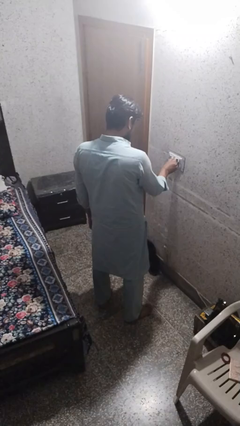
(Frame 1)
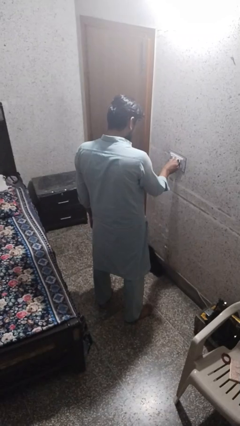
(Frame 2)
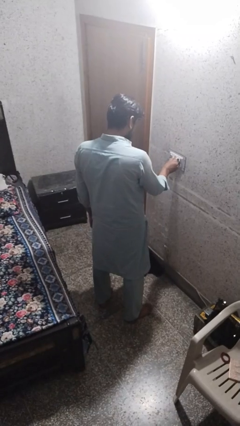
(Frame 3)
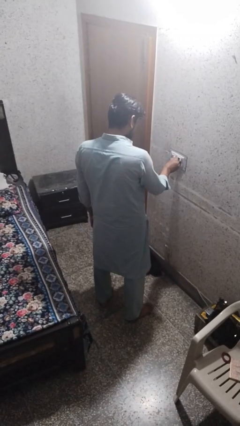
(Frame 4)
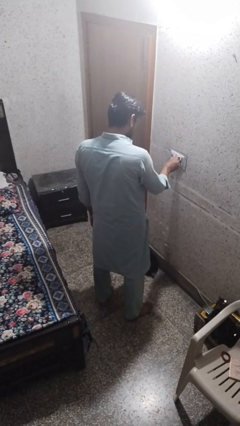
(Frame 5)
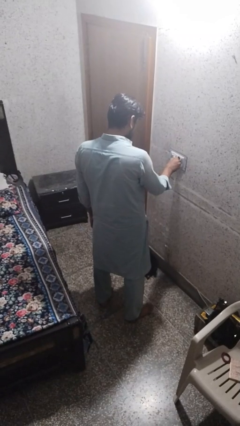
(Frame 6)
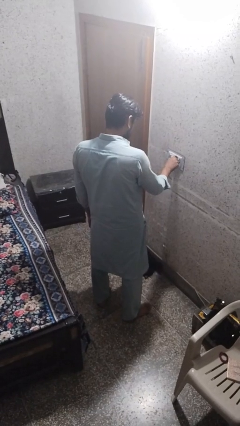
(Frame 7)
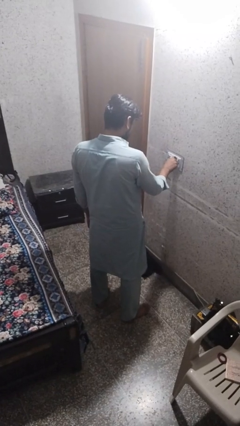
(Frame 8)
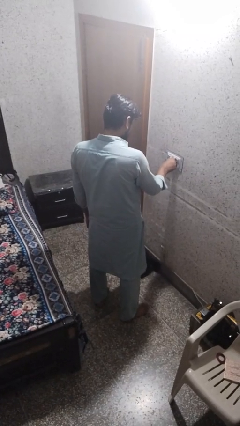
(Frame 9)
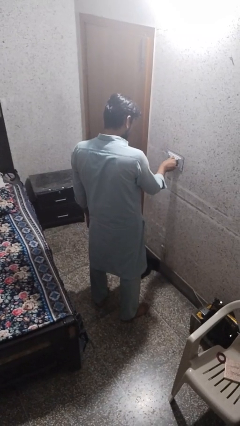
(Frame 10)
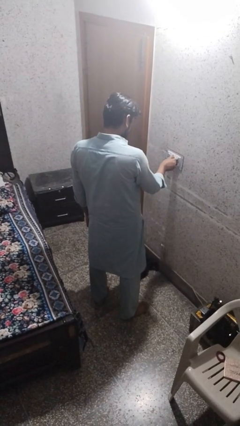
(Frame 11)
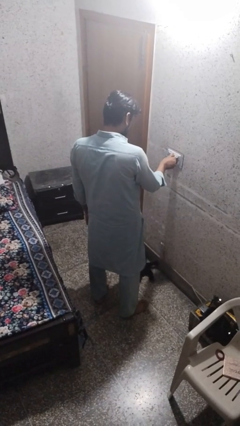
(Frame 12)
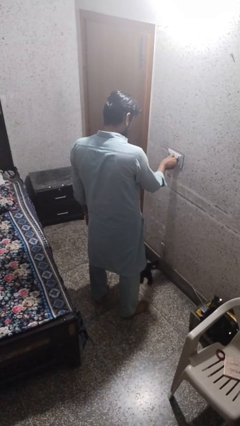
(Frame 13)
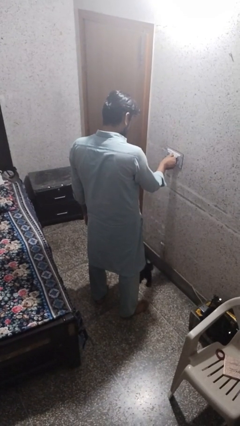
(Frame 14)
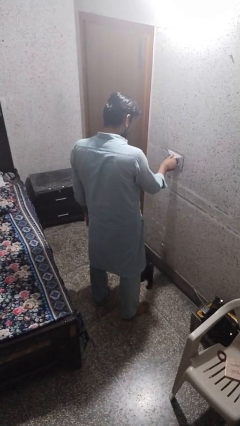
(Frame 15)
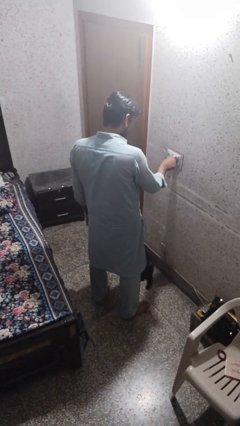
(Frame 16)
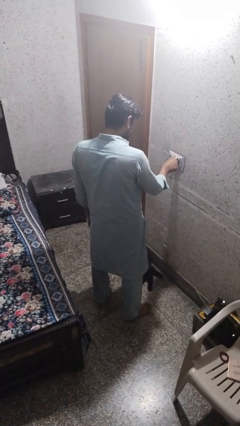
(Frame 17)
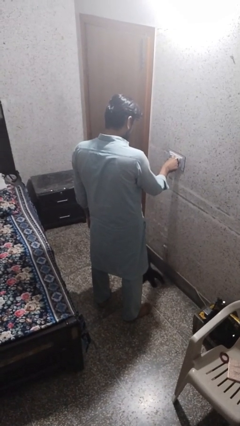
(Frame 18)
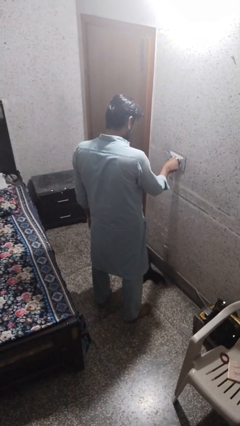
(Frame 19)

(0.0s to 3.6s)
person turns off fan

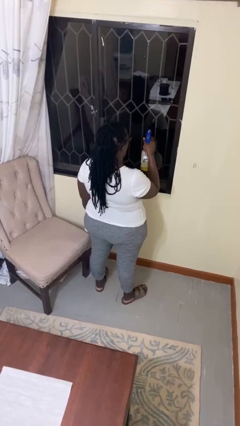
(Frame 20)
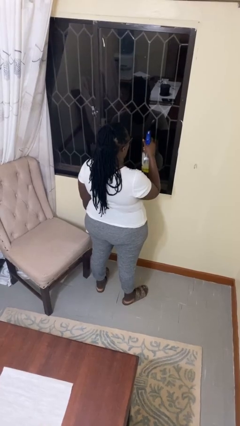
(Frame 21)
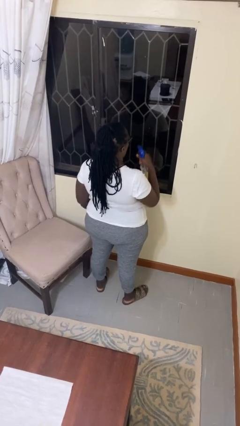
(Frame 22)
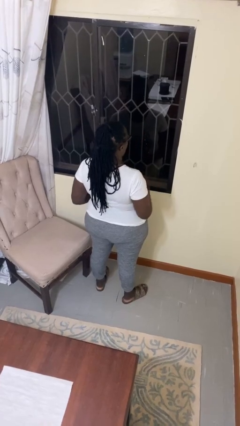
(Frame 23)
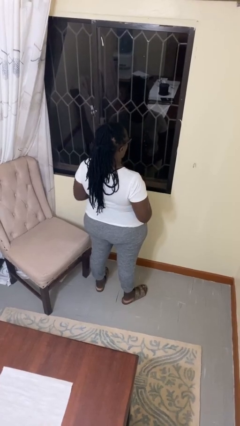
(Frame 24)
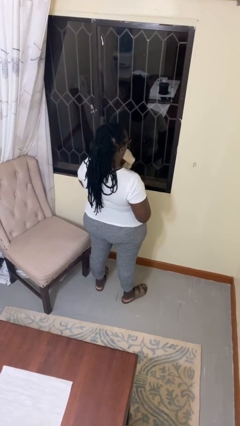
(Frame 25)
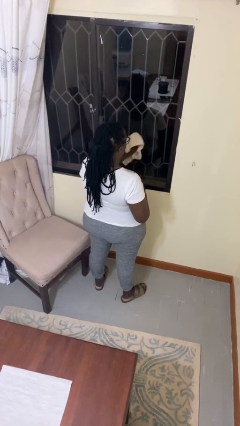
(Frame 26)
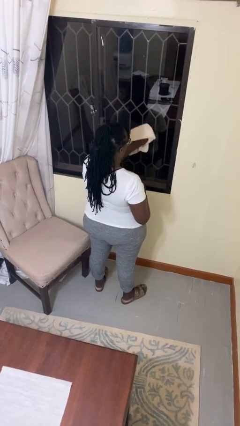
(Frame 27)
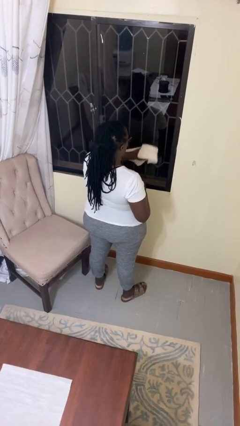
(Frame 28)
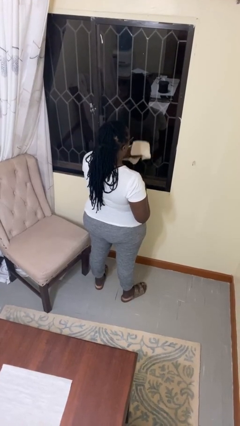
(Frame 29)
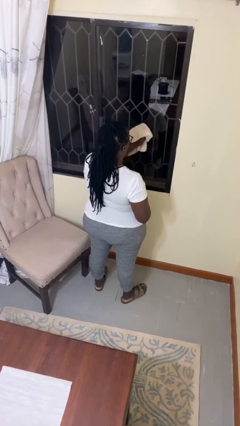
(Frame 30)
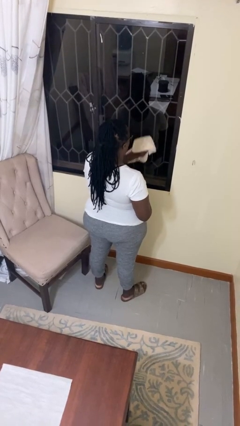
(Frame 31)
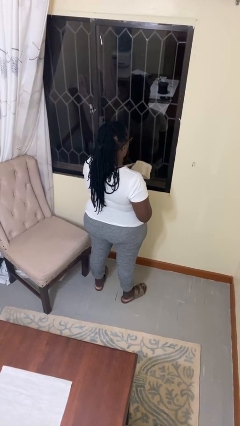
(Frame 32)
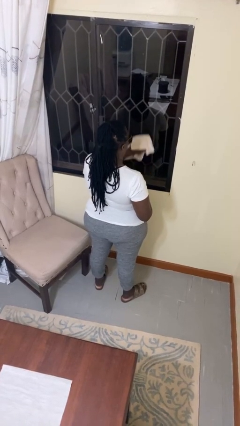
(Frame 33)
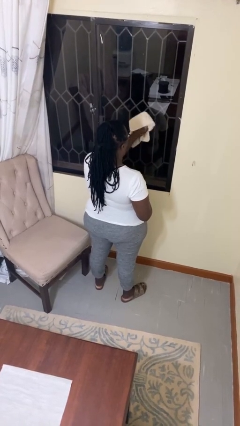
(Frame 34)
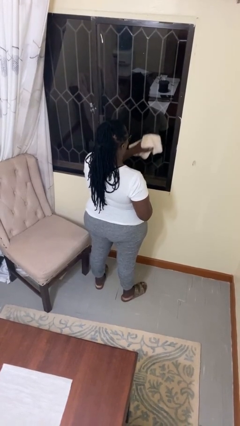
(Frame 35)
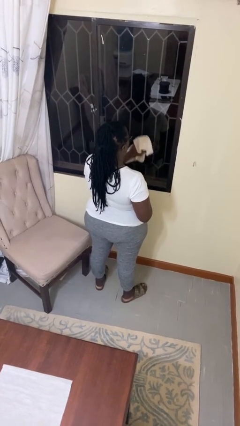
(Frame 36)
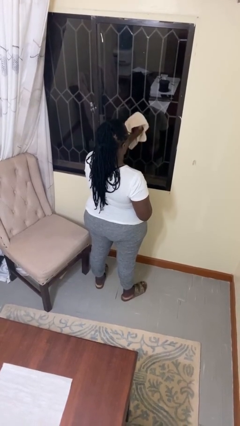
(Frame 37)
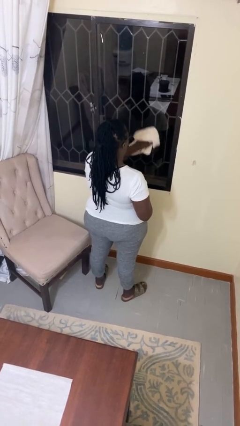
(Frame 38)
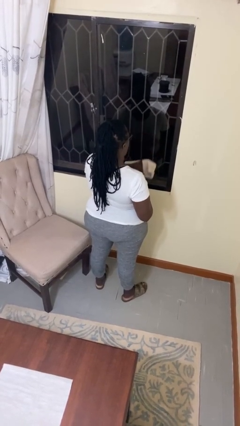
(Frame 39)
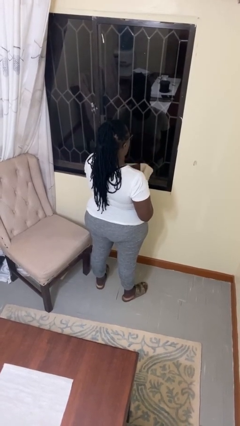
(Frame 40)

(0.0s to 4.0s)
person washes window

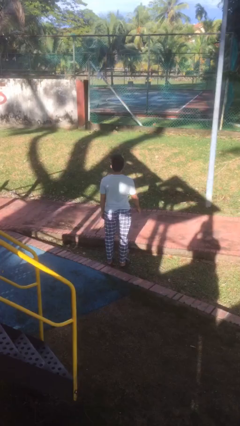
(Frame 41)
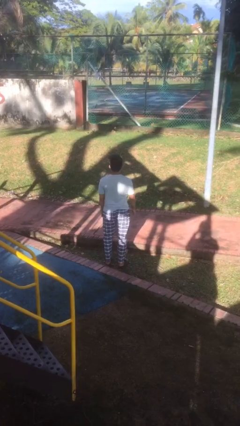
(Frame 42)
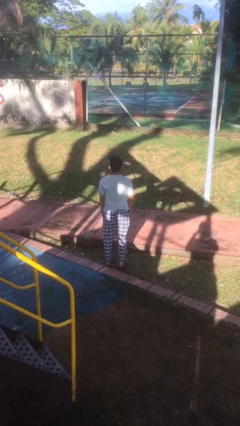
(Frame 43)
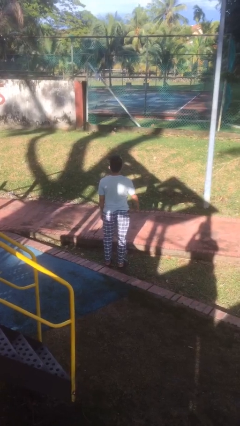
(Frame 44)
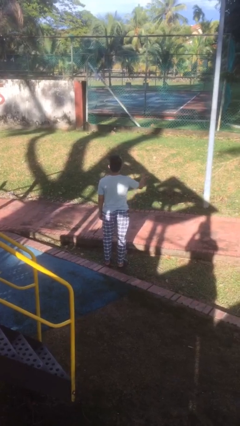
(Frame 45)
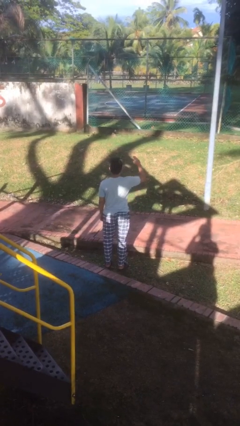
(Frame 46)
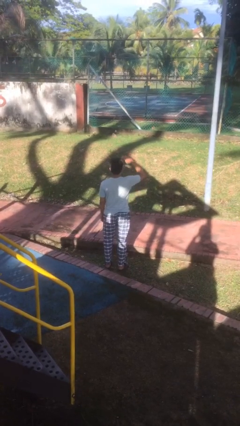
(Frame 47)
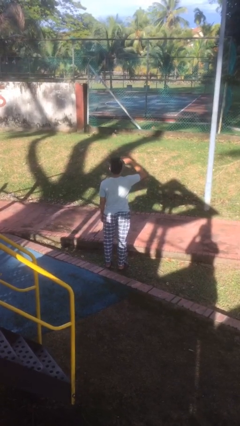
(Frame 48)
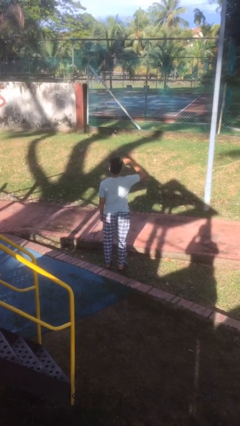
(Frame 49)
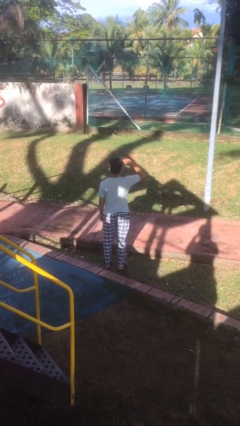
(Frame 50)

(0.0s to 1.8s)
person salutes

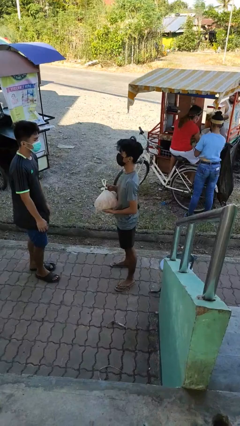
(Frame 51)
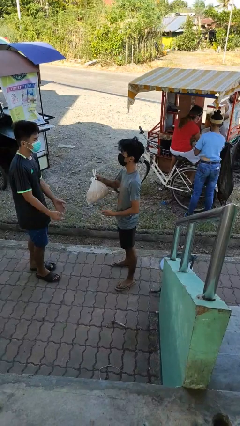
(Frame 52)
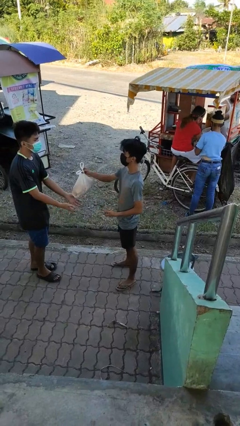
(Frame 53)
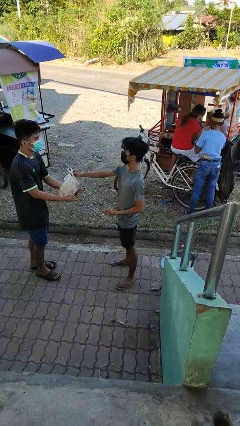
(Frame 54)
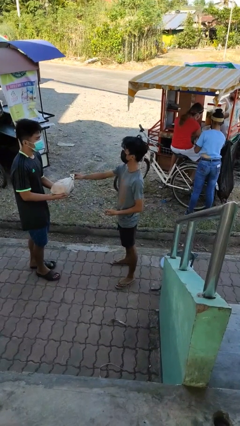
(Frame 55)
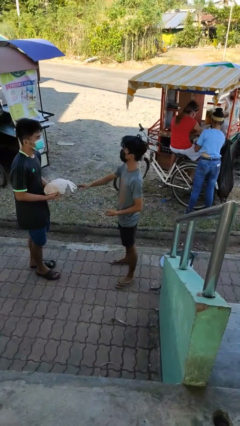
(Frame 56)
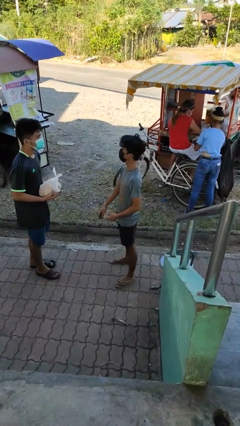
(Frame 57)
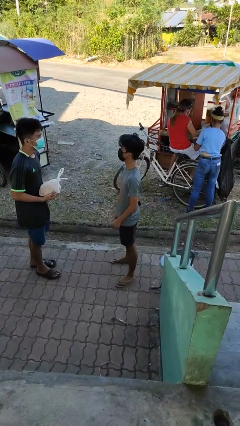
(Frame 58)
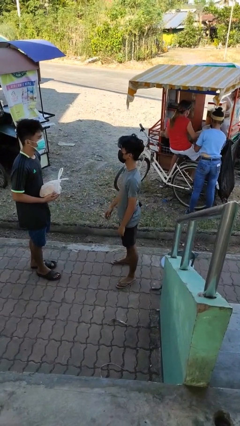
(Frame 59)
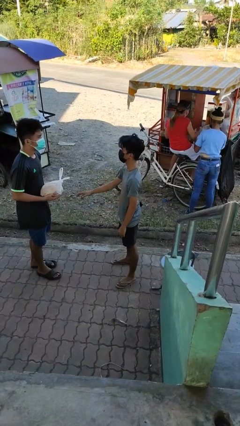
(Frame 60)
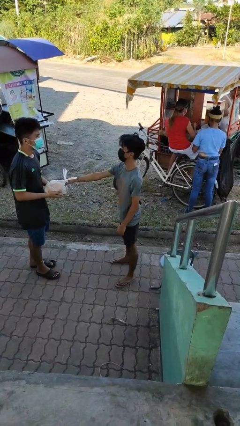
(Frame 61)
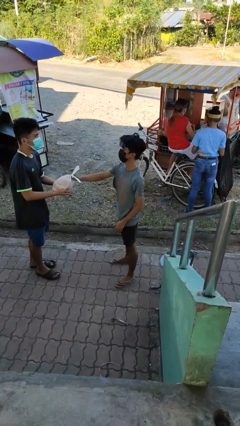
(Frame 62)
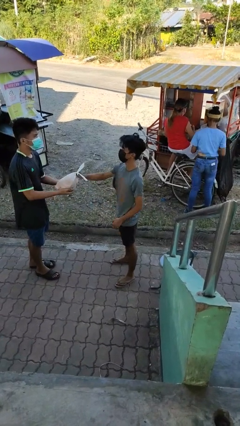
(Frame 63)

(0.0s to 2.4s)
person transfers object to person

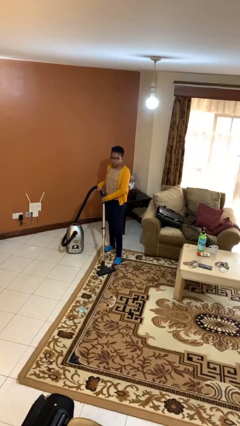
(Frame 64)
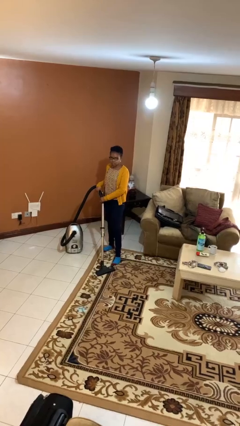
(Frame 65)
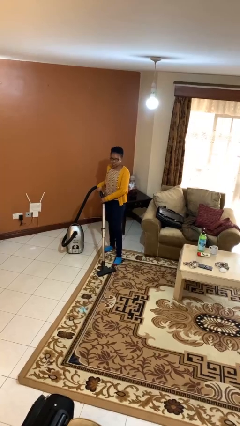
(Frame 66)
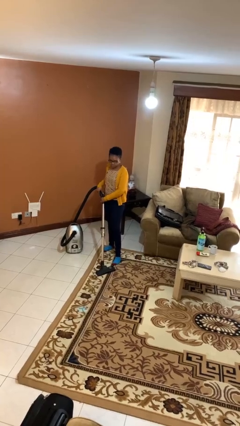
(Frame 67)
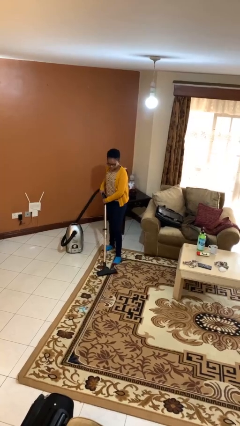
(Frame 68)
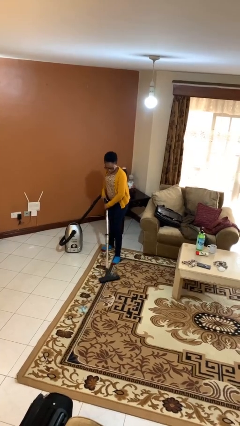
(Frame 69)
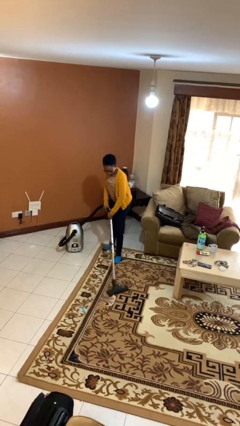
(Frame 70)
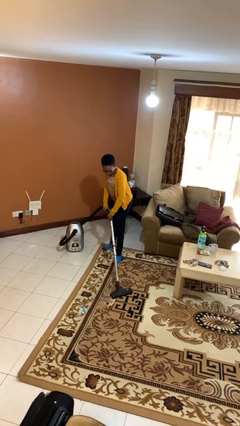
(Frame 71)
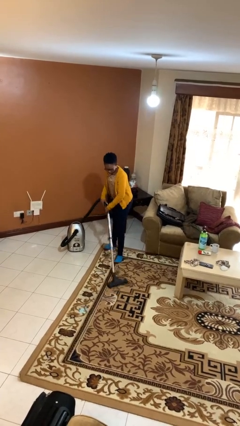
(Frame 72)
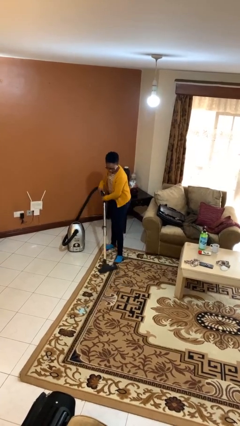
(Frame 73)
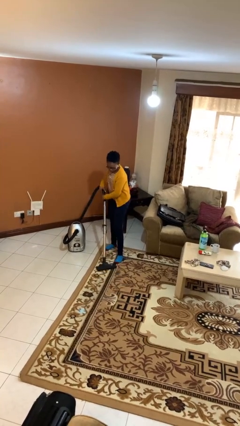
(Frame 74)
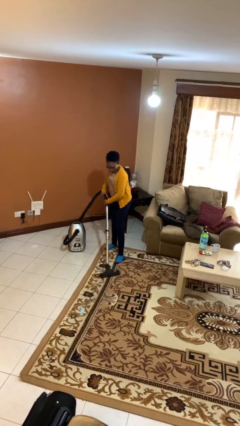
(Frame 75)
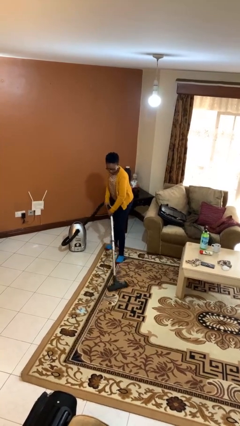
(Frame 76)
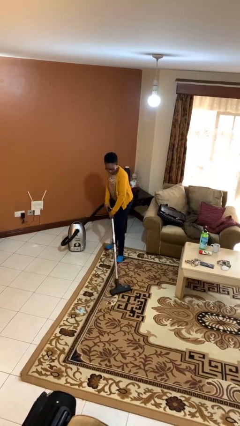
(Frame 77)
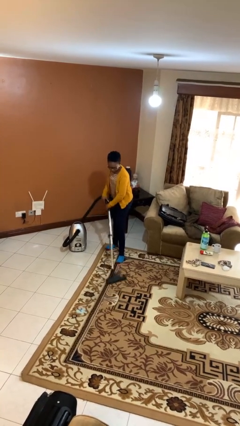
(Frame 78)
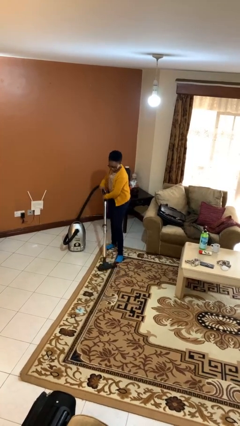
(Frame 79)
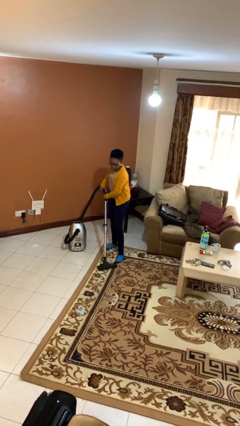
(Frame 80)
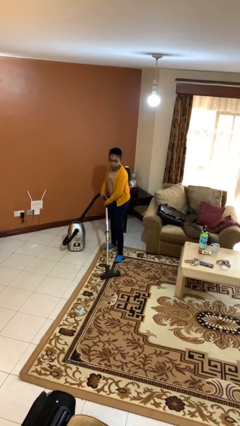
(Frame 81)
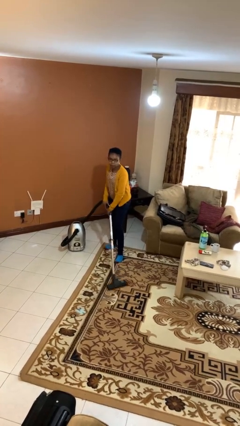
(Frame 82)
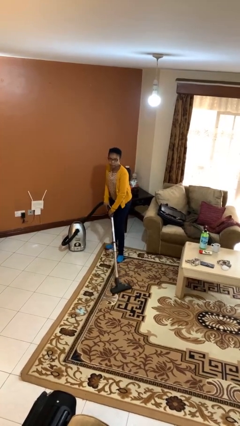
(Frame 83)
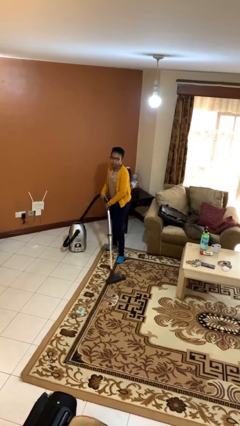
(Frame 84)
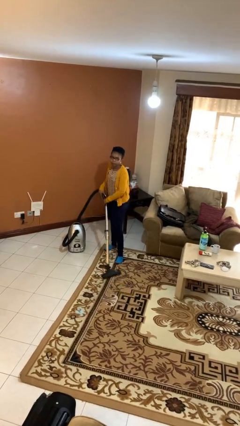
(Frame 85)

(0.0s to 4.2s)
person vacuums carpet

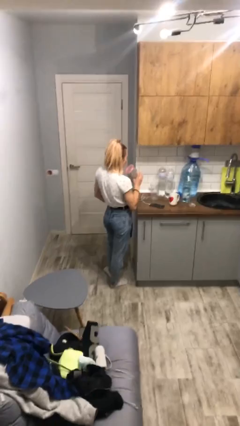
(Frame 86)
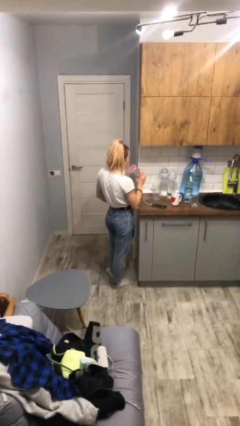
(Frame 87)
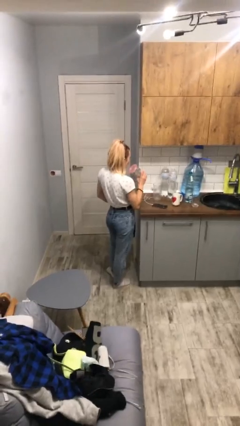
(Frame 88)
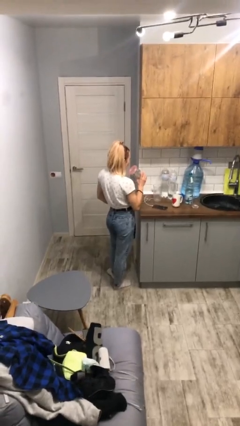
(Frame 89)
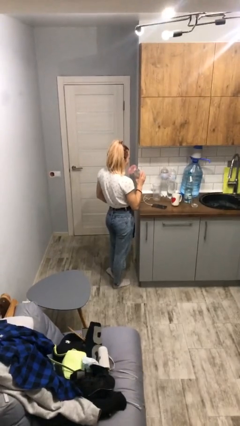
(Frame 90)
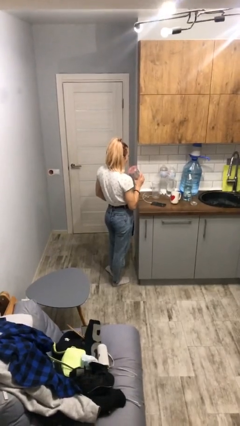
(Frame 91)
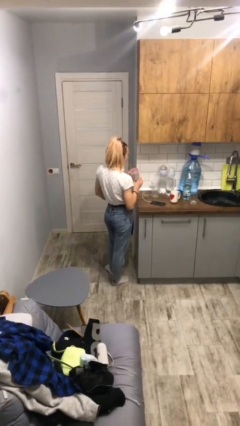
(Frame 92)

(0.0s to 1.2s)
person drinks from straw

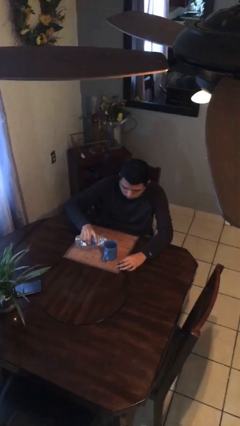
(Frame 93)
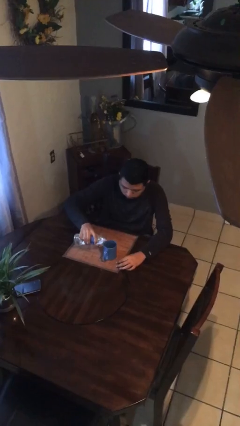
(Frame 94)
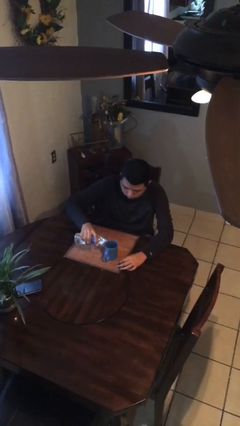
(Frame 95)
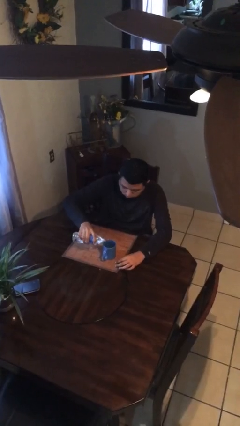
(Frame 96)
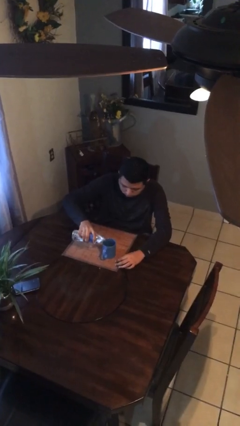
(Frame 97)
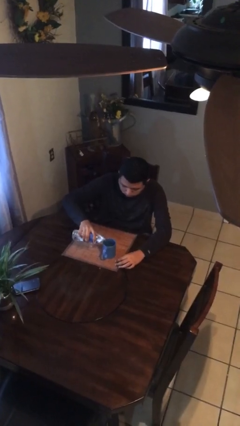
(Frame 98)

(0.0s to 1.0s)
person pours liquid into cup
